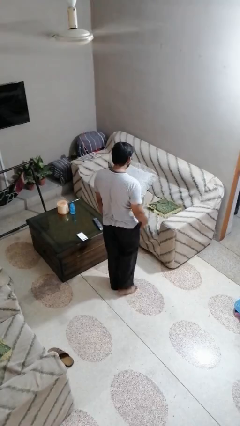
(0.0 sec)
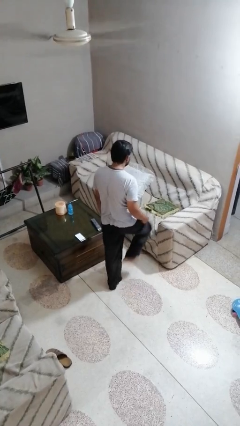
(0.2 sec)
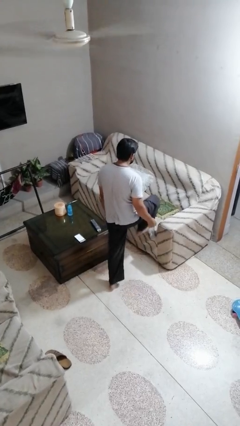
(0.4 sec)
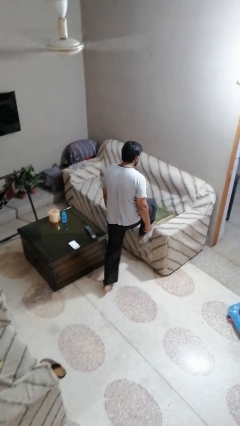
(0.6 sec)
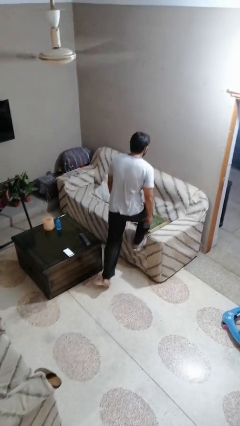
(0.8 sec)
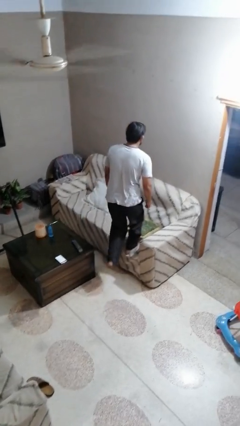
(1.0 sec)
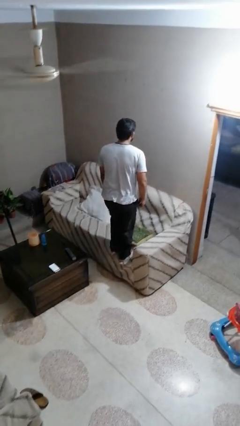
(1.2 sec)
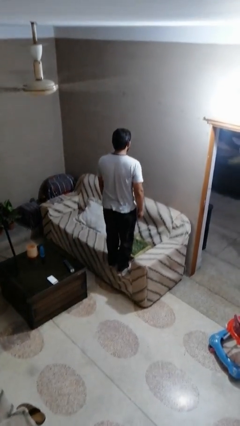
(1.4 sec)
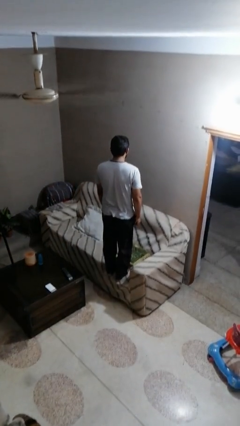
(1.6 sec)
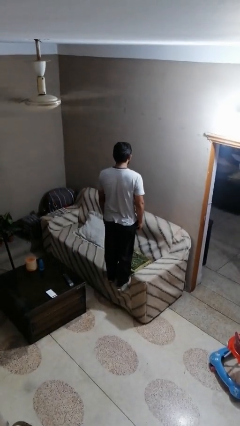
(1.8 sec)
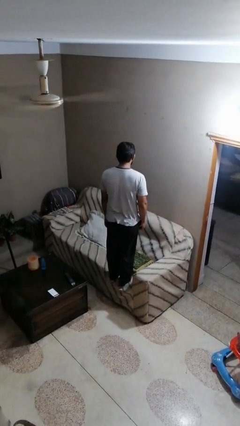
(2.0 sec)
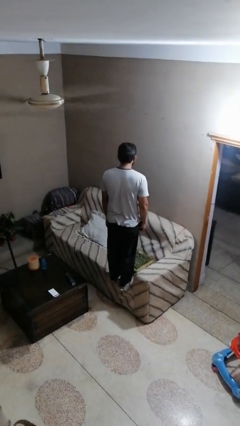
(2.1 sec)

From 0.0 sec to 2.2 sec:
person climbs on couch

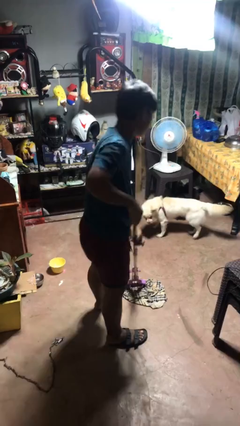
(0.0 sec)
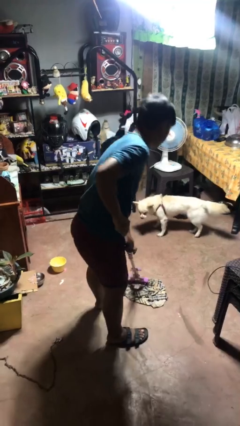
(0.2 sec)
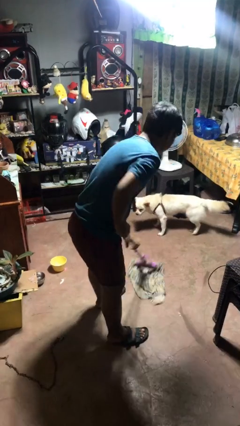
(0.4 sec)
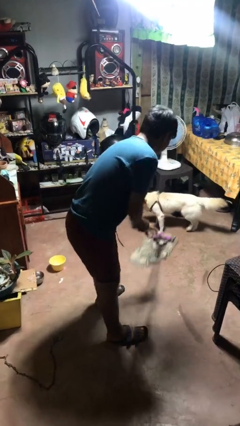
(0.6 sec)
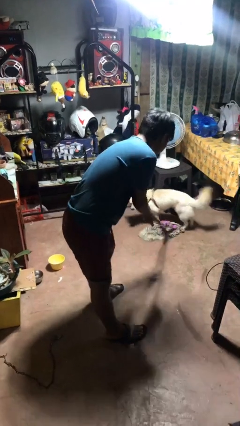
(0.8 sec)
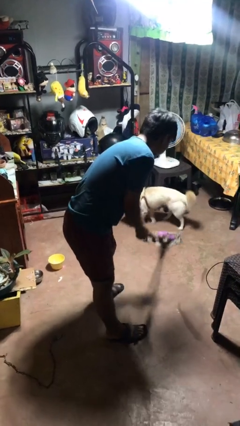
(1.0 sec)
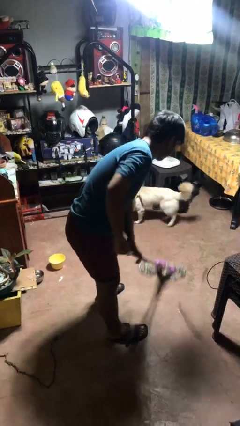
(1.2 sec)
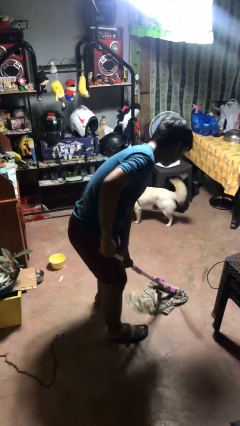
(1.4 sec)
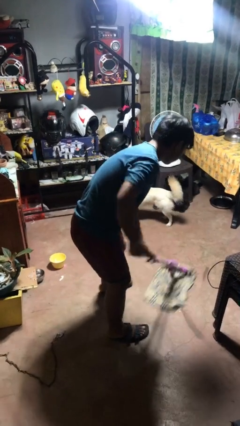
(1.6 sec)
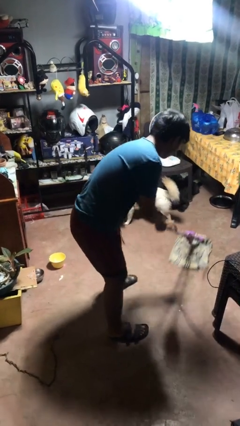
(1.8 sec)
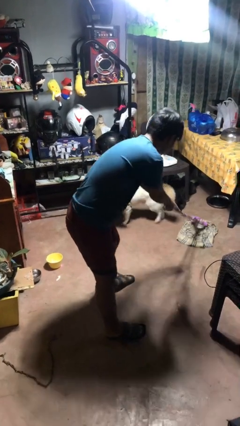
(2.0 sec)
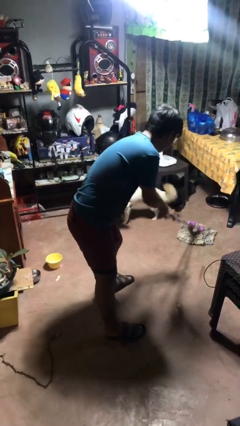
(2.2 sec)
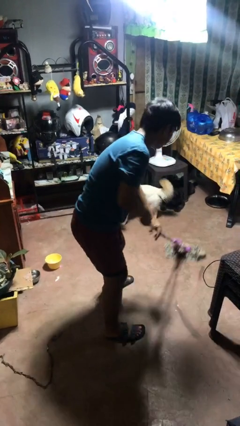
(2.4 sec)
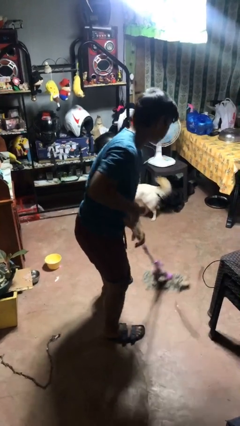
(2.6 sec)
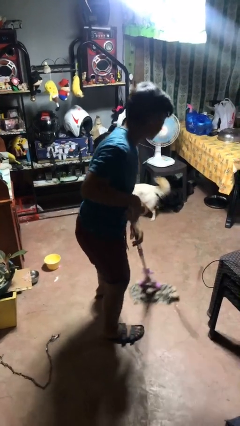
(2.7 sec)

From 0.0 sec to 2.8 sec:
person mops

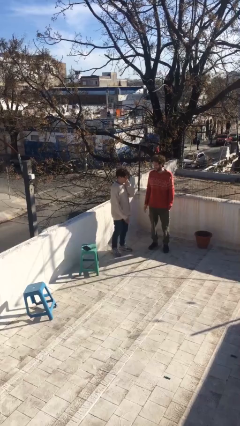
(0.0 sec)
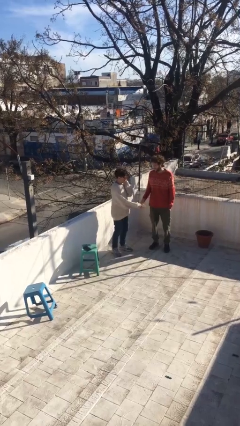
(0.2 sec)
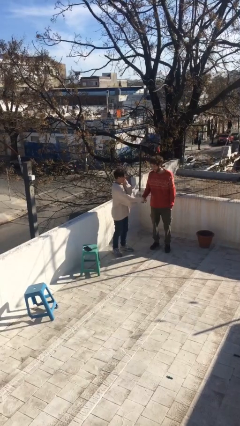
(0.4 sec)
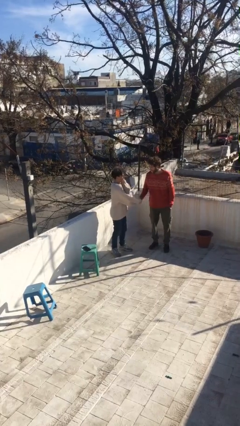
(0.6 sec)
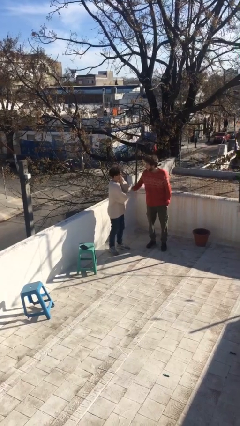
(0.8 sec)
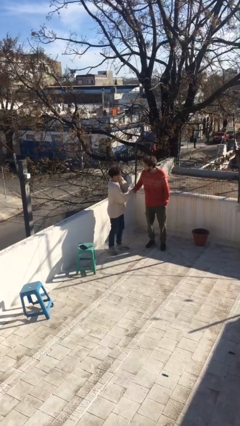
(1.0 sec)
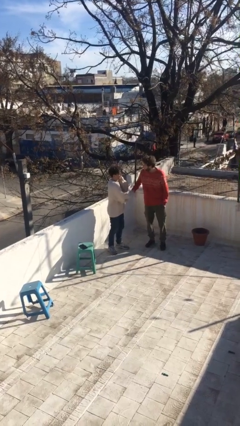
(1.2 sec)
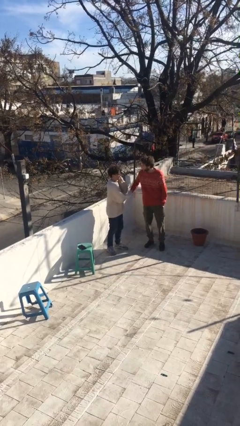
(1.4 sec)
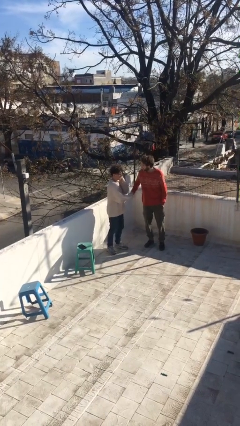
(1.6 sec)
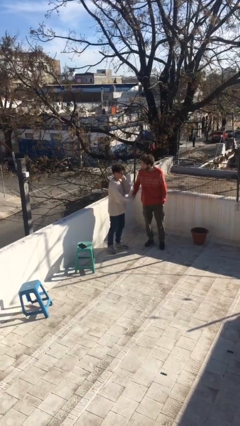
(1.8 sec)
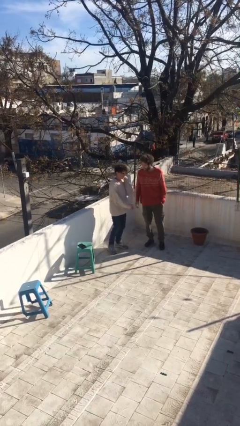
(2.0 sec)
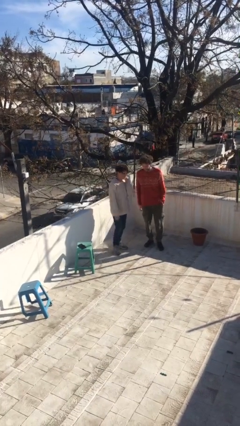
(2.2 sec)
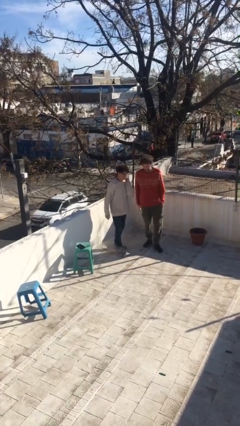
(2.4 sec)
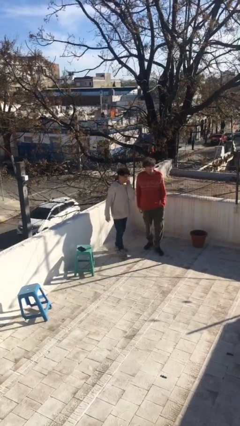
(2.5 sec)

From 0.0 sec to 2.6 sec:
person shakes hand

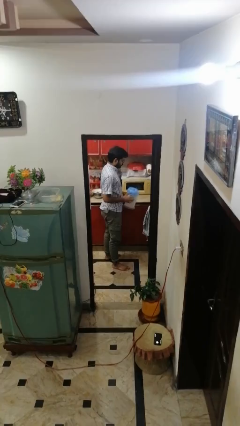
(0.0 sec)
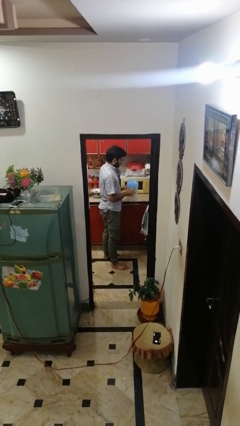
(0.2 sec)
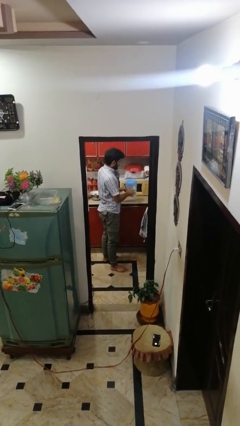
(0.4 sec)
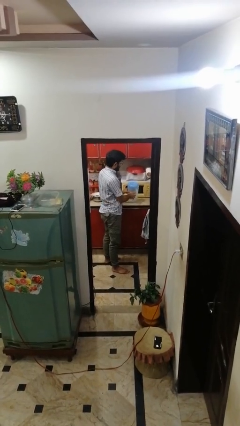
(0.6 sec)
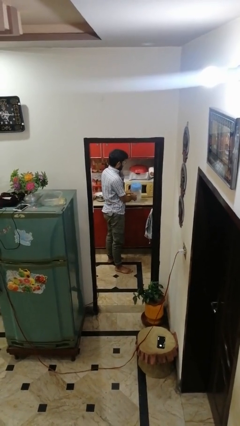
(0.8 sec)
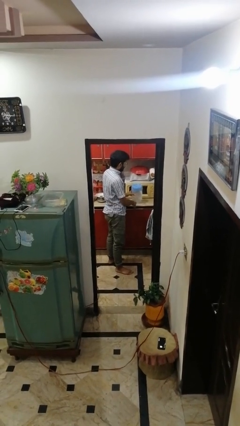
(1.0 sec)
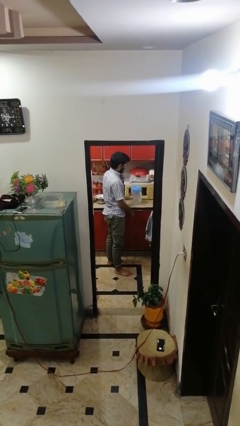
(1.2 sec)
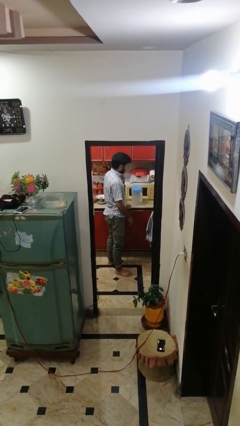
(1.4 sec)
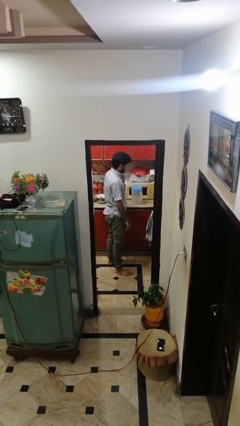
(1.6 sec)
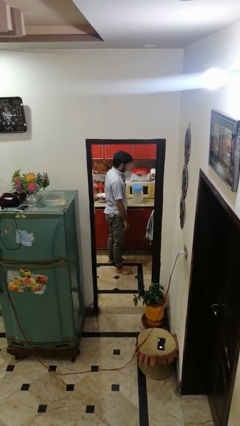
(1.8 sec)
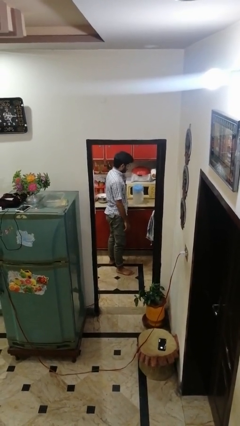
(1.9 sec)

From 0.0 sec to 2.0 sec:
person puts down object on countertop

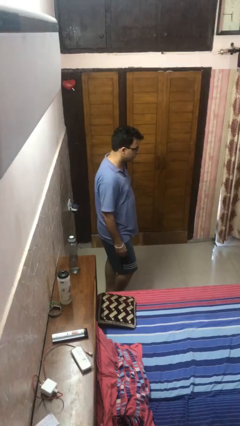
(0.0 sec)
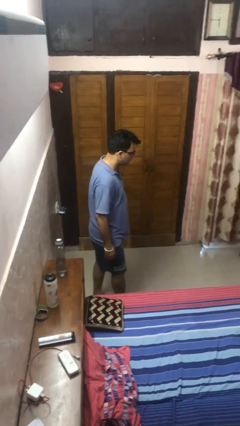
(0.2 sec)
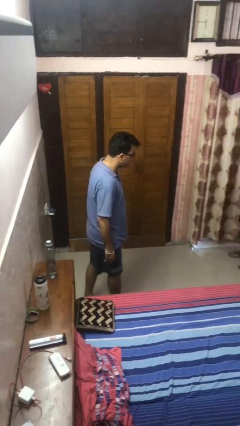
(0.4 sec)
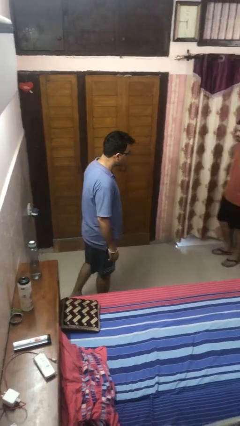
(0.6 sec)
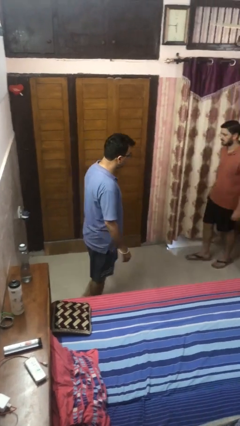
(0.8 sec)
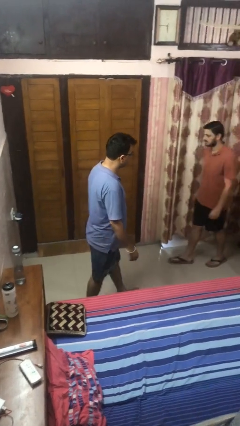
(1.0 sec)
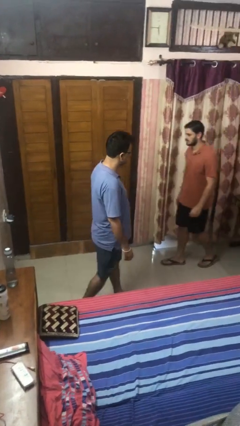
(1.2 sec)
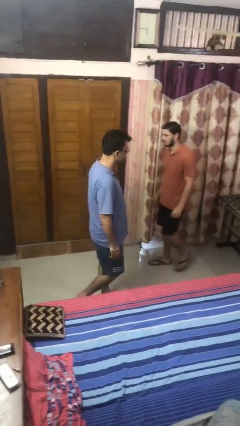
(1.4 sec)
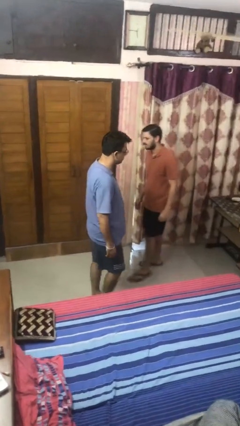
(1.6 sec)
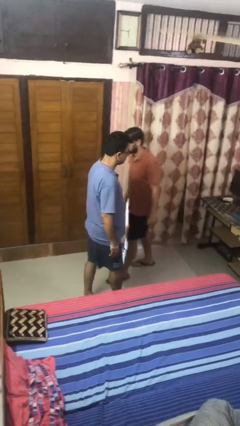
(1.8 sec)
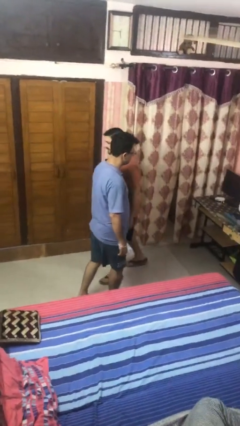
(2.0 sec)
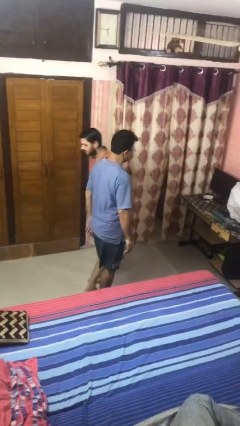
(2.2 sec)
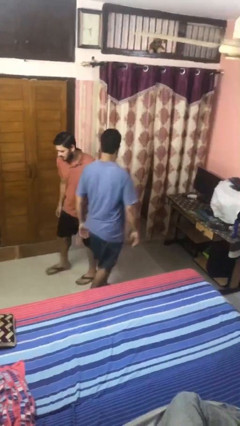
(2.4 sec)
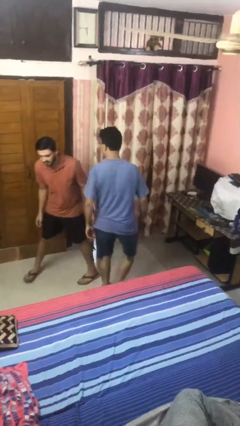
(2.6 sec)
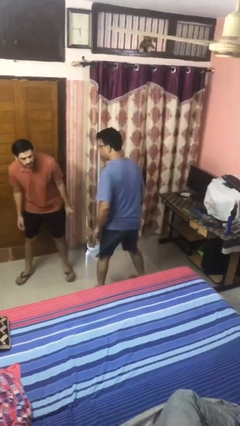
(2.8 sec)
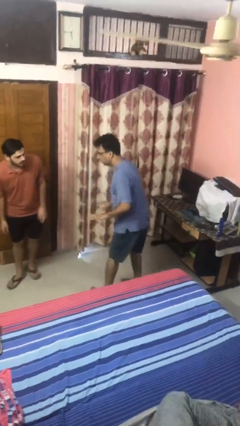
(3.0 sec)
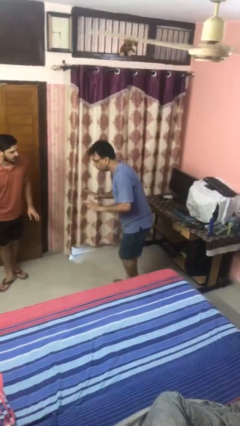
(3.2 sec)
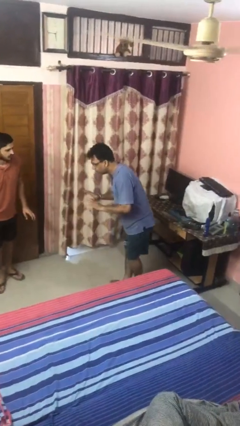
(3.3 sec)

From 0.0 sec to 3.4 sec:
person bumps into person

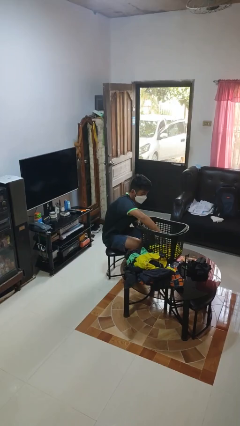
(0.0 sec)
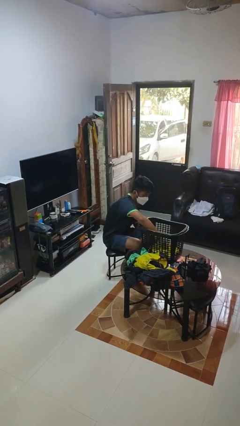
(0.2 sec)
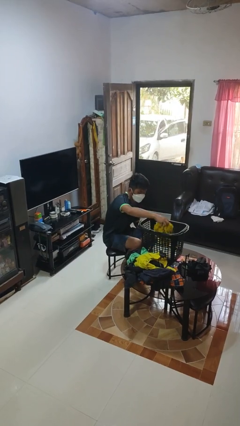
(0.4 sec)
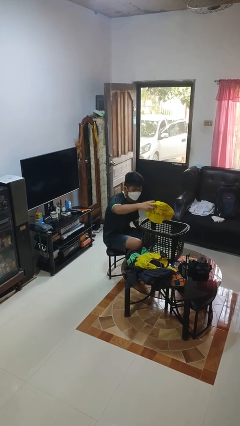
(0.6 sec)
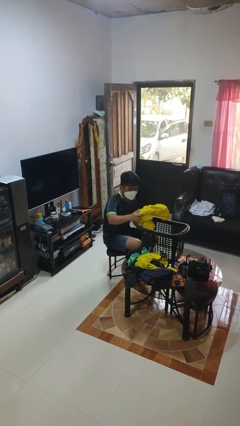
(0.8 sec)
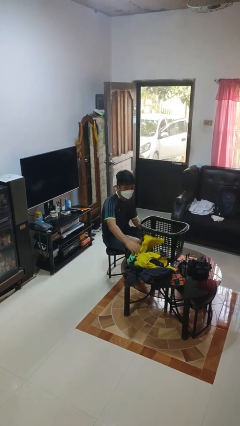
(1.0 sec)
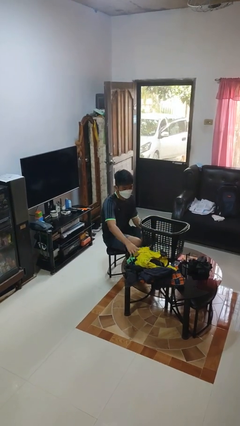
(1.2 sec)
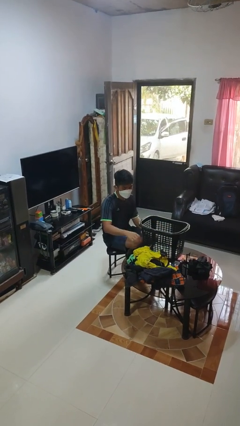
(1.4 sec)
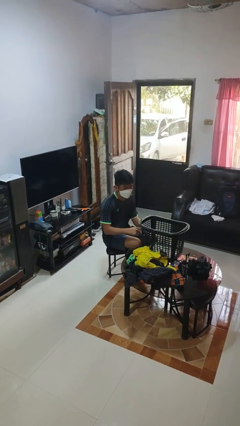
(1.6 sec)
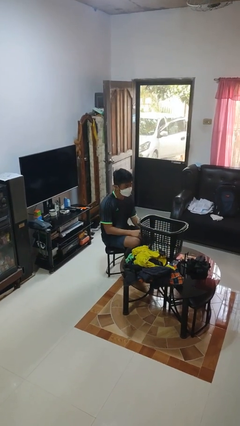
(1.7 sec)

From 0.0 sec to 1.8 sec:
person takes object from basket

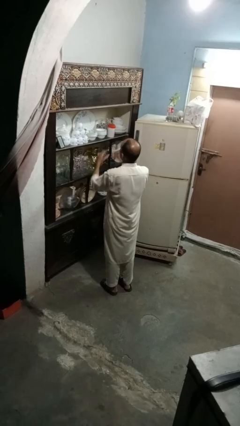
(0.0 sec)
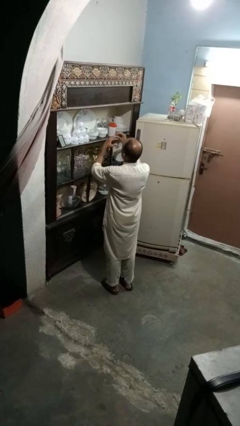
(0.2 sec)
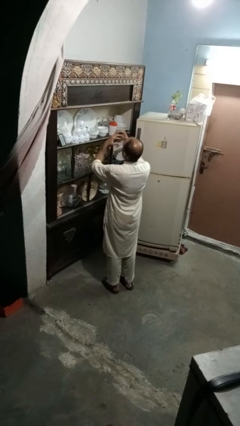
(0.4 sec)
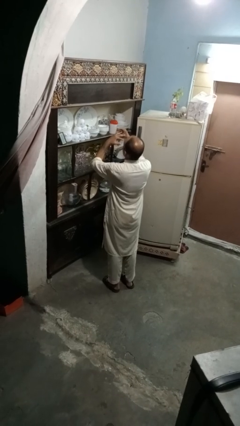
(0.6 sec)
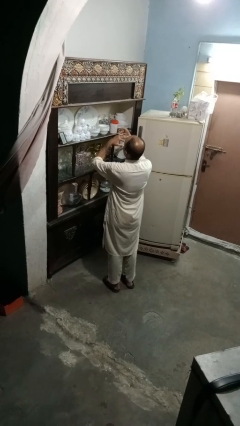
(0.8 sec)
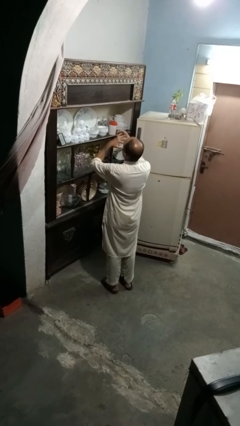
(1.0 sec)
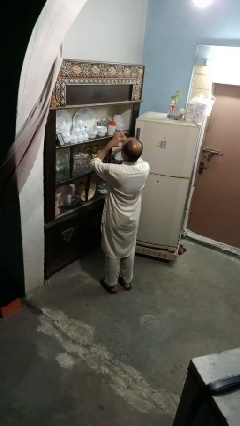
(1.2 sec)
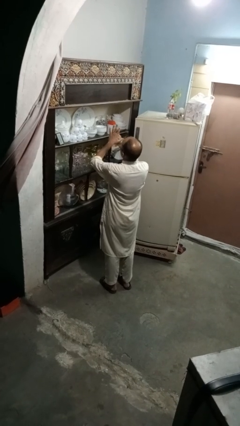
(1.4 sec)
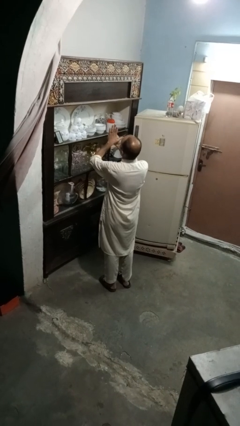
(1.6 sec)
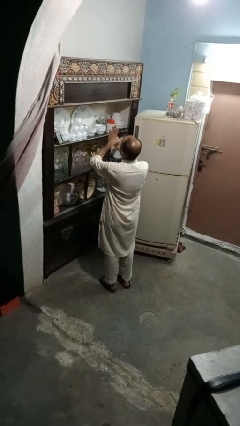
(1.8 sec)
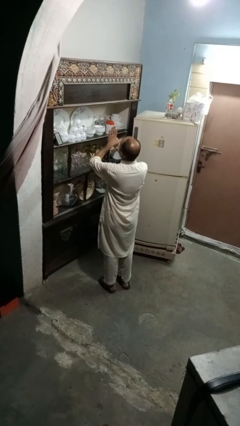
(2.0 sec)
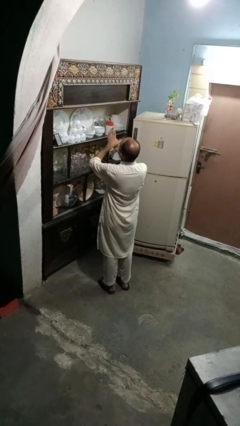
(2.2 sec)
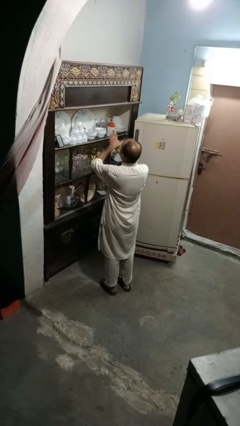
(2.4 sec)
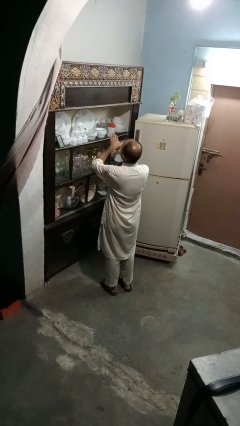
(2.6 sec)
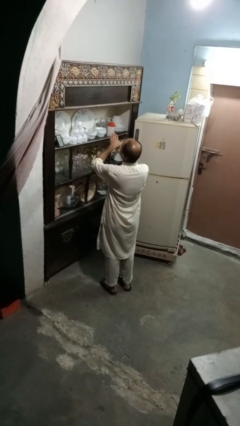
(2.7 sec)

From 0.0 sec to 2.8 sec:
person puts on ring
